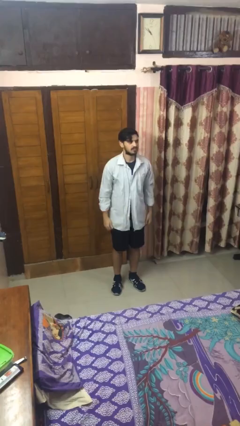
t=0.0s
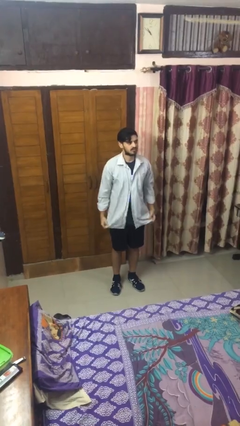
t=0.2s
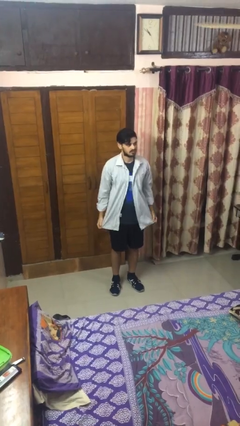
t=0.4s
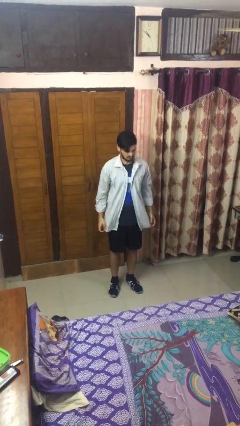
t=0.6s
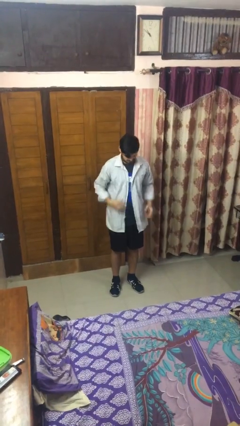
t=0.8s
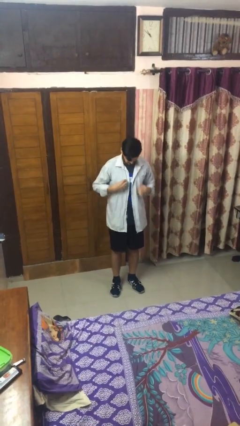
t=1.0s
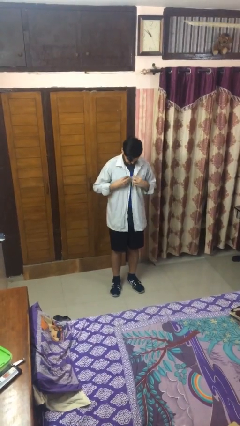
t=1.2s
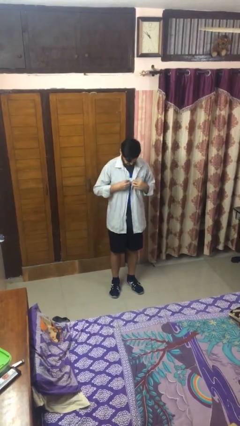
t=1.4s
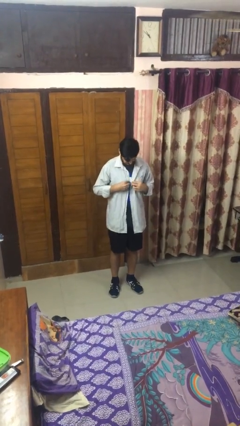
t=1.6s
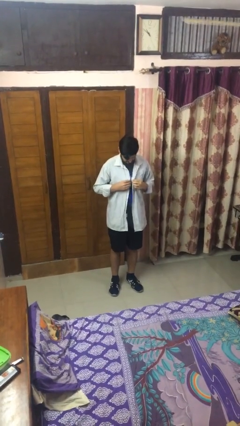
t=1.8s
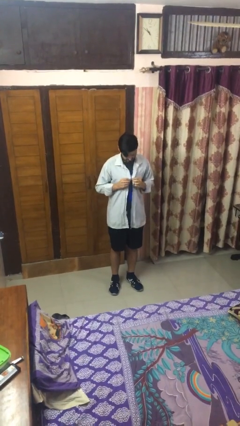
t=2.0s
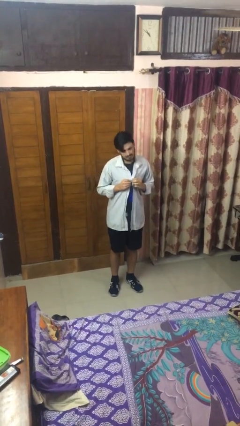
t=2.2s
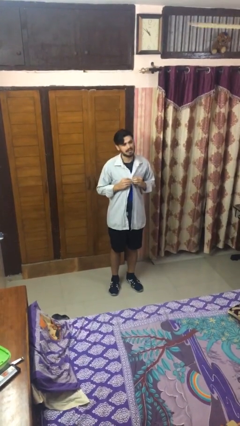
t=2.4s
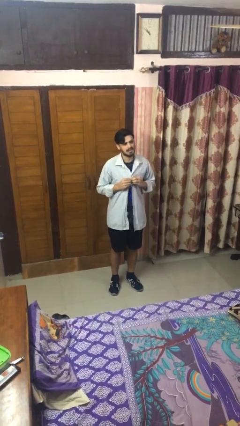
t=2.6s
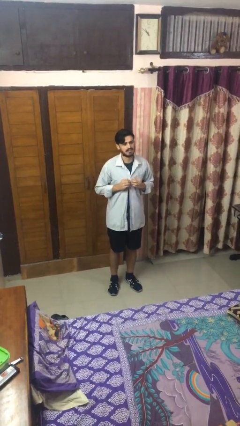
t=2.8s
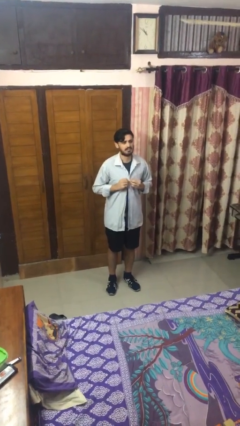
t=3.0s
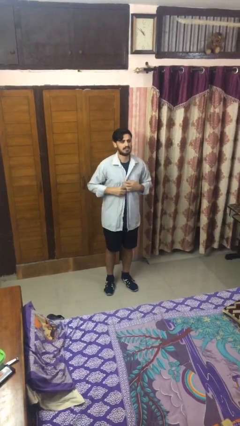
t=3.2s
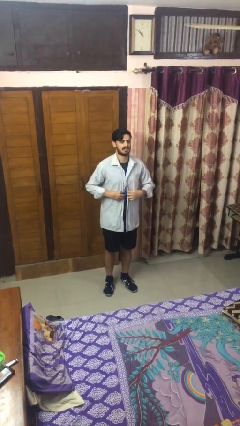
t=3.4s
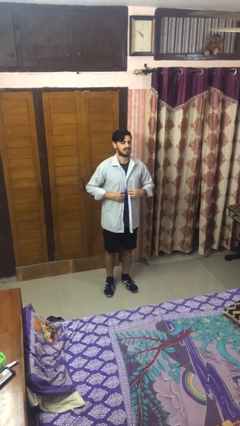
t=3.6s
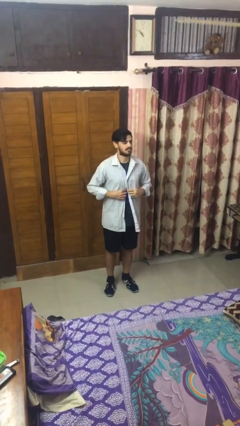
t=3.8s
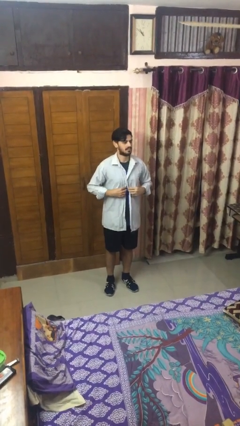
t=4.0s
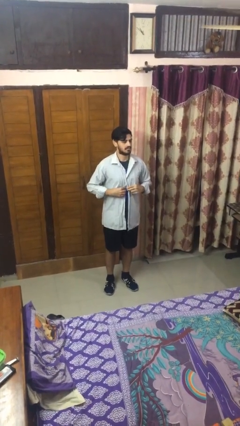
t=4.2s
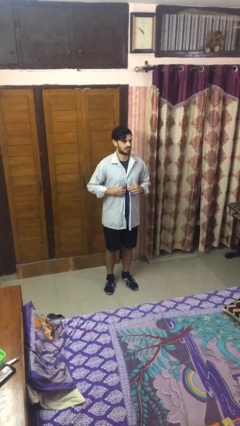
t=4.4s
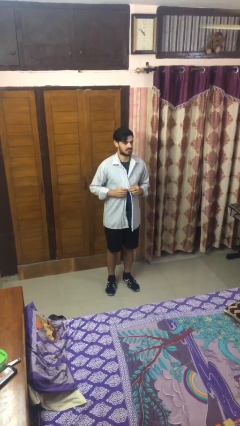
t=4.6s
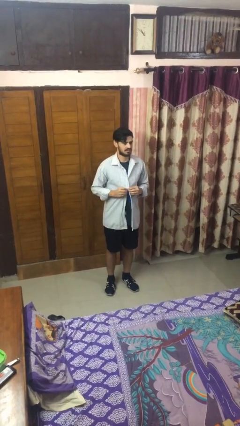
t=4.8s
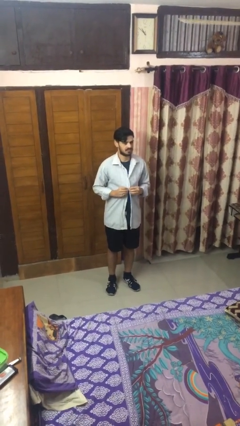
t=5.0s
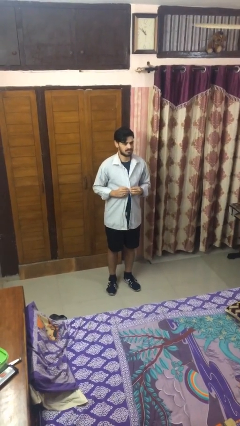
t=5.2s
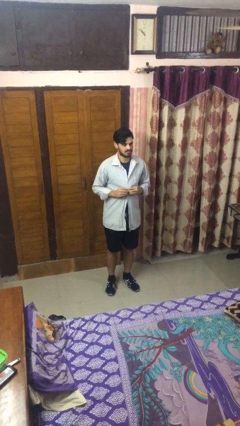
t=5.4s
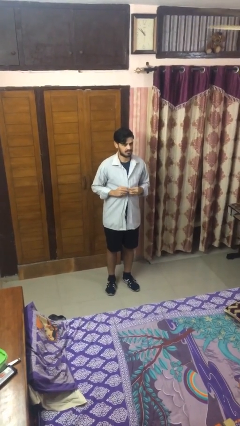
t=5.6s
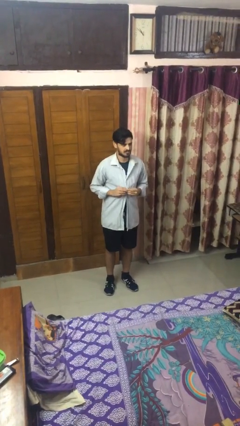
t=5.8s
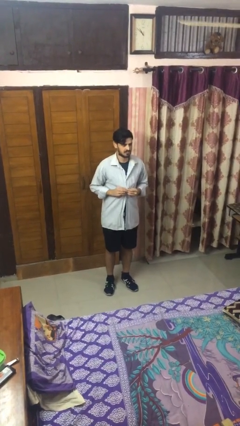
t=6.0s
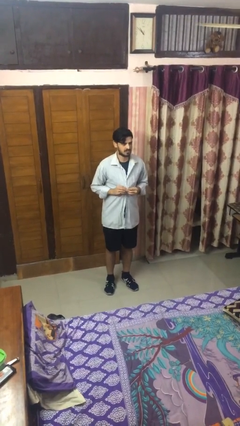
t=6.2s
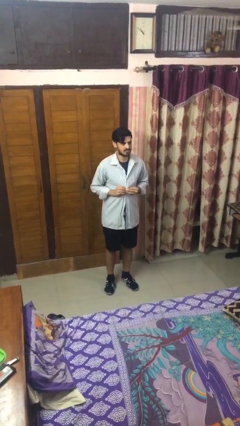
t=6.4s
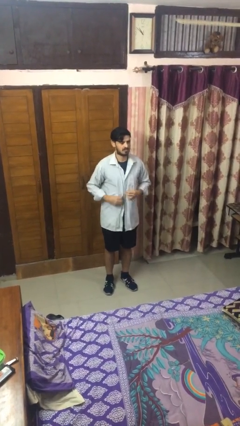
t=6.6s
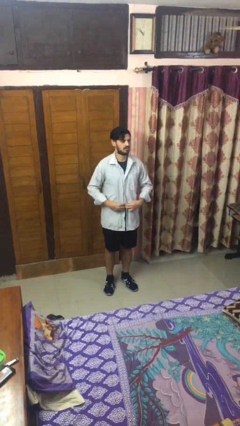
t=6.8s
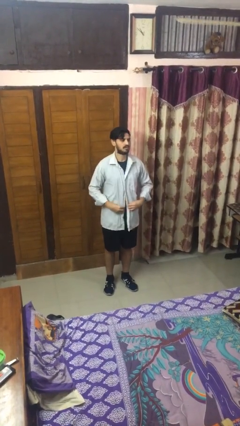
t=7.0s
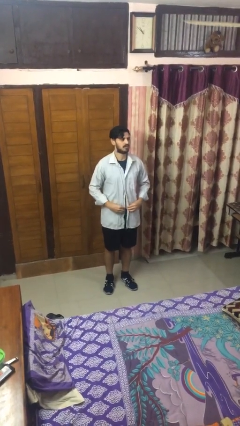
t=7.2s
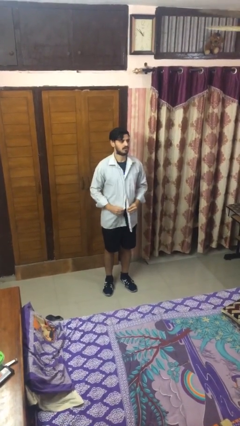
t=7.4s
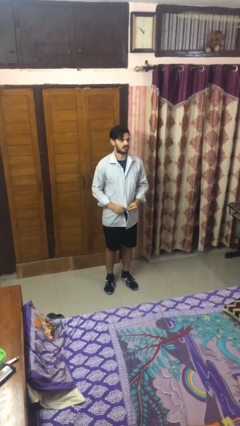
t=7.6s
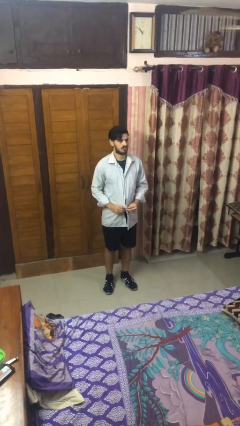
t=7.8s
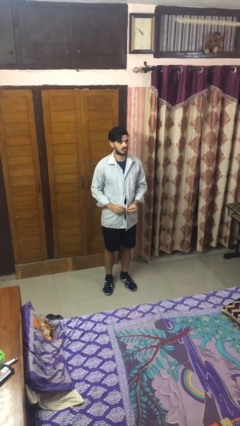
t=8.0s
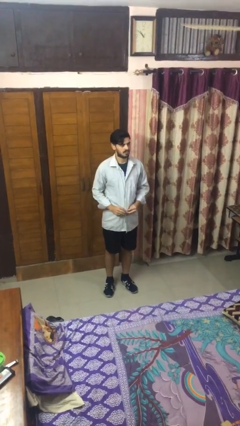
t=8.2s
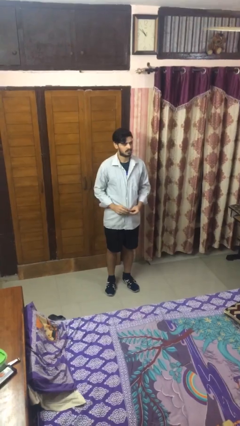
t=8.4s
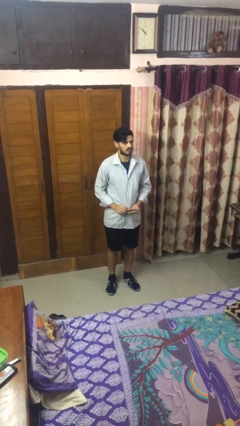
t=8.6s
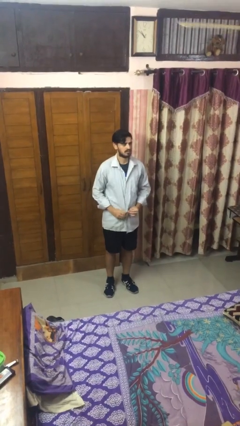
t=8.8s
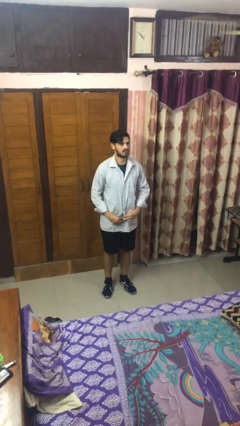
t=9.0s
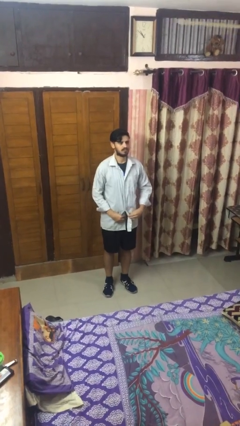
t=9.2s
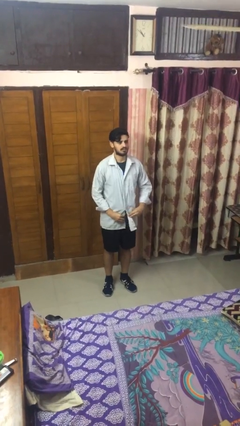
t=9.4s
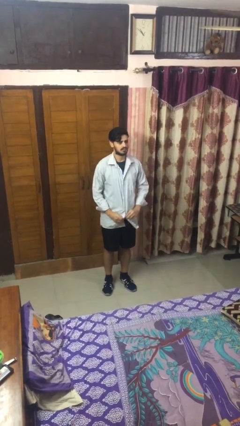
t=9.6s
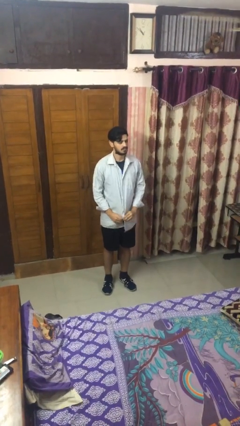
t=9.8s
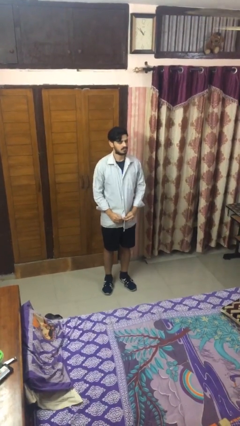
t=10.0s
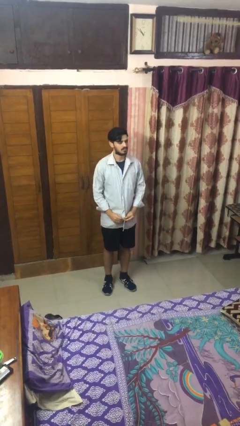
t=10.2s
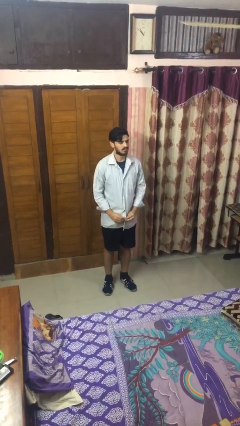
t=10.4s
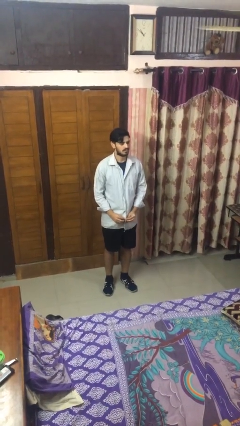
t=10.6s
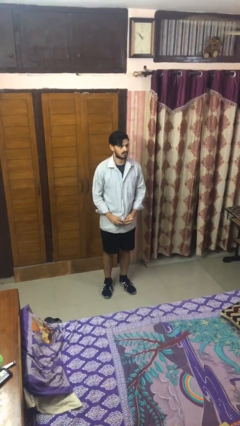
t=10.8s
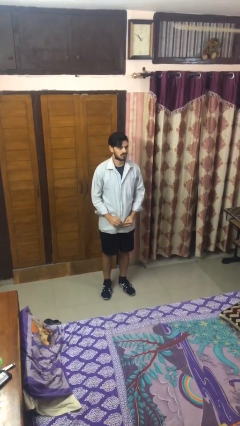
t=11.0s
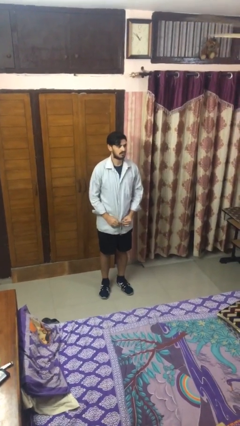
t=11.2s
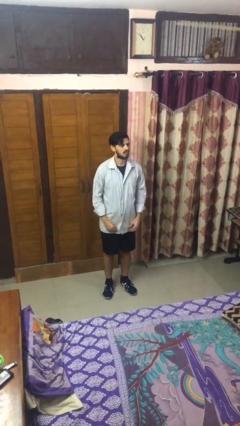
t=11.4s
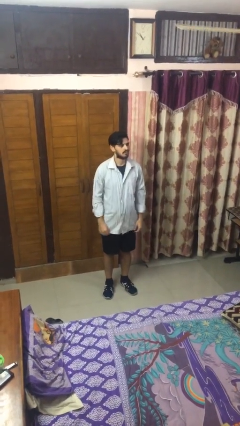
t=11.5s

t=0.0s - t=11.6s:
person buttons shirt

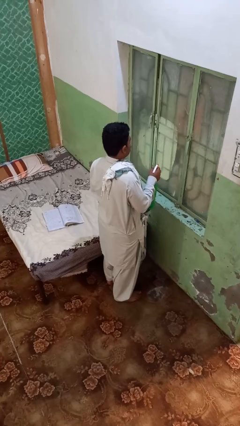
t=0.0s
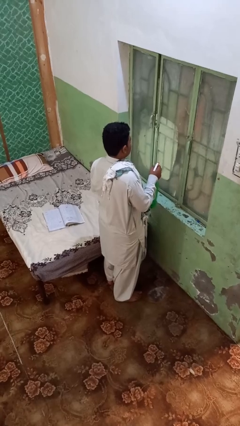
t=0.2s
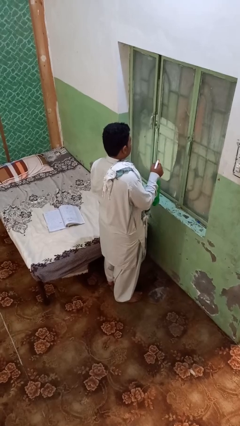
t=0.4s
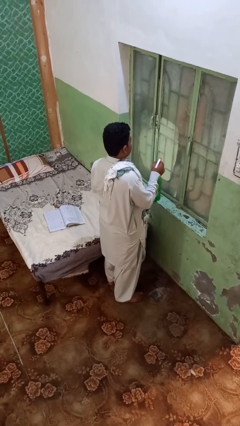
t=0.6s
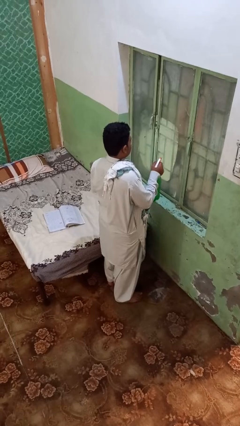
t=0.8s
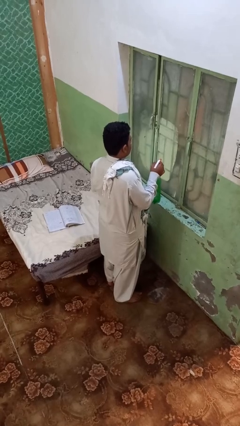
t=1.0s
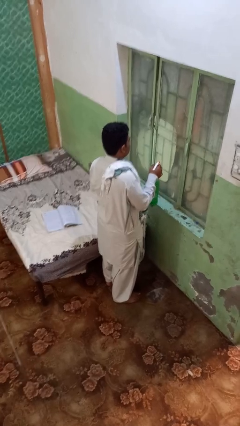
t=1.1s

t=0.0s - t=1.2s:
person sprays from bottle

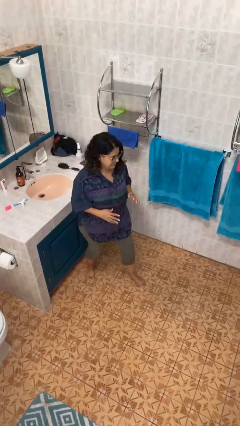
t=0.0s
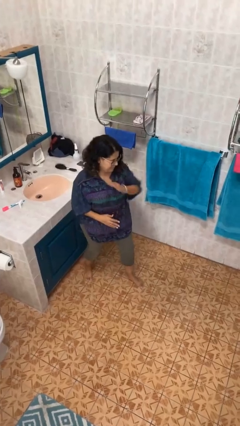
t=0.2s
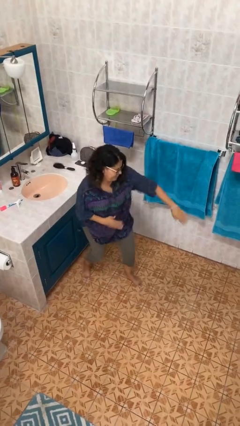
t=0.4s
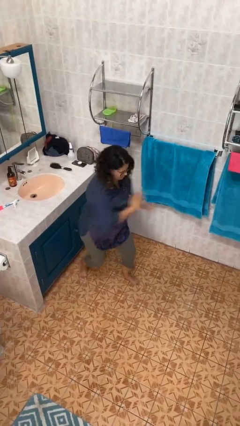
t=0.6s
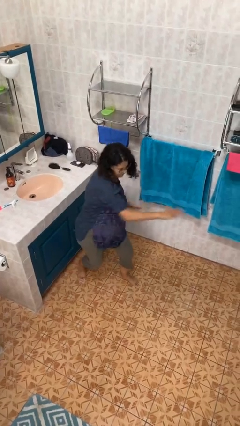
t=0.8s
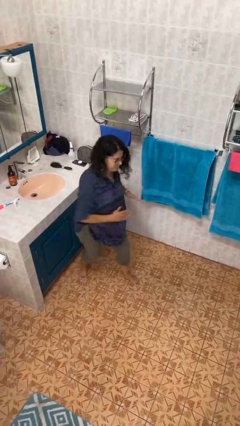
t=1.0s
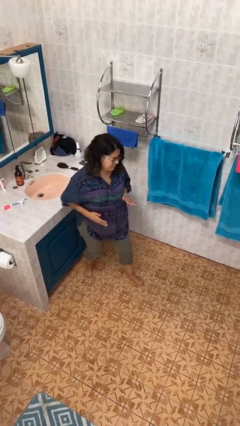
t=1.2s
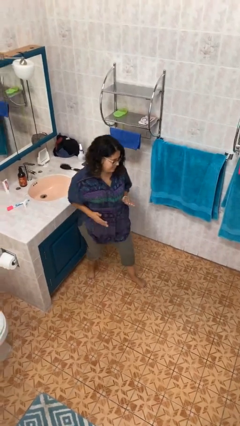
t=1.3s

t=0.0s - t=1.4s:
person karate chop

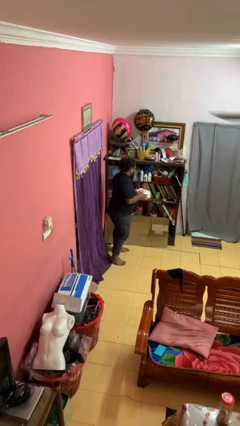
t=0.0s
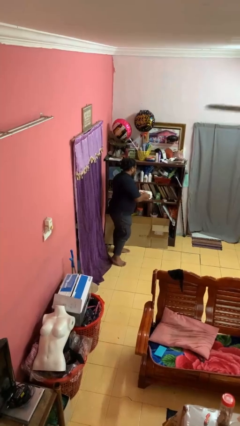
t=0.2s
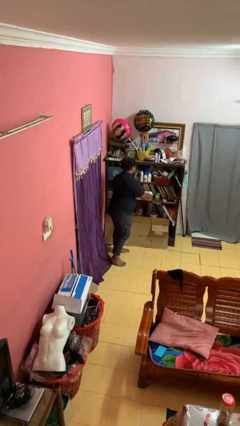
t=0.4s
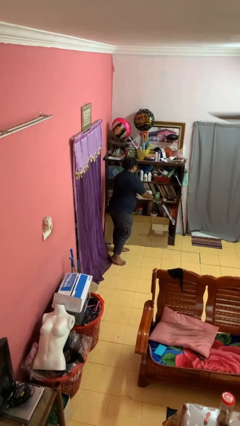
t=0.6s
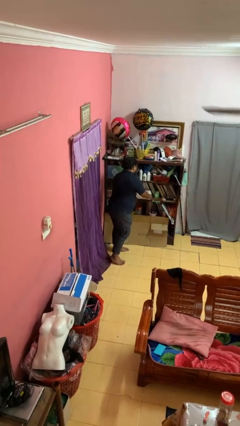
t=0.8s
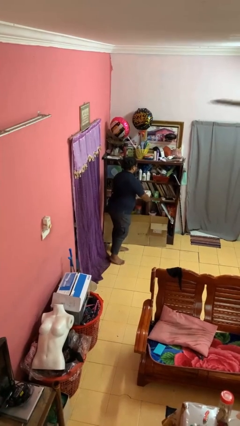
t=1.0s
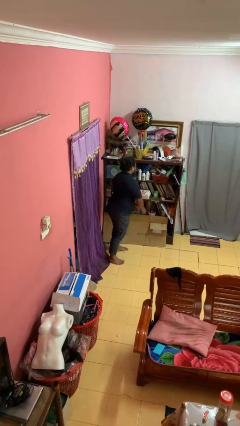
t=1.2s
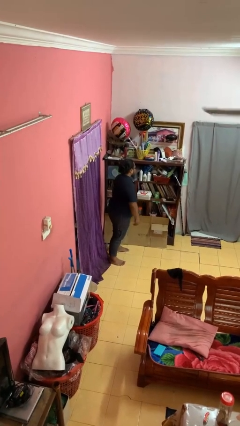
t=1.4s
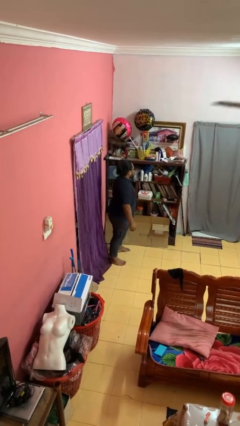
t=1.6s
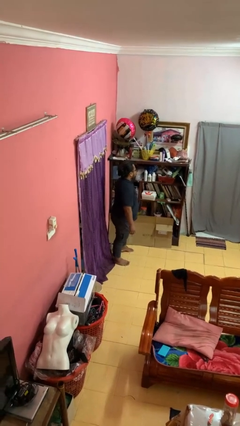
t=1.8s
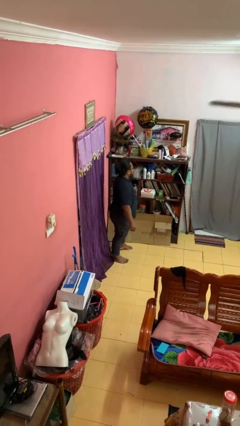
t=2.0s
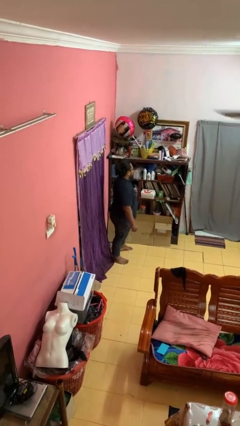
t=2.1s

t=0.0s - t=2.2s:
person puts object in cabinet

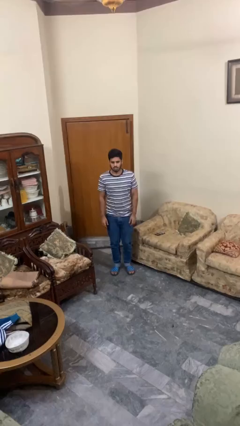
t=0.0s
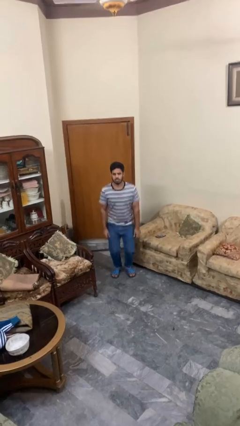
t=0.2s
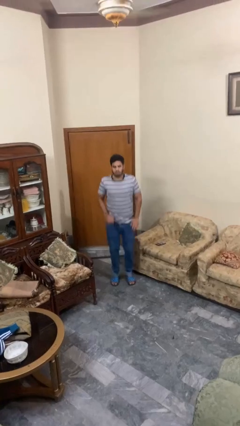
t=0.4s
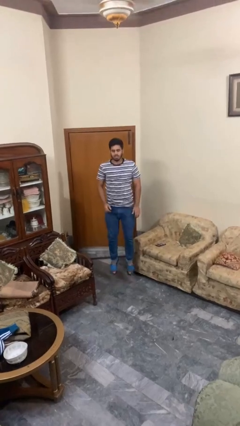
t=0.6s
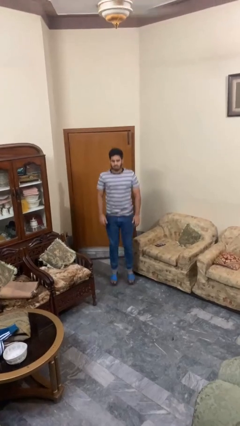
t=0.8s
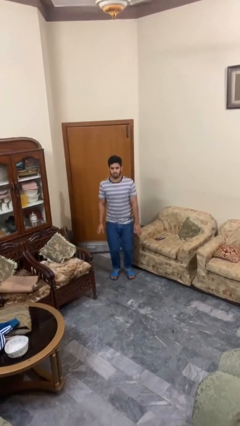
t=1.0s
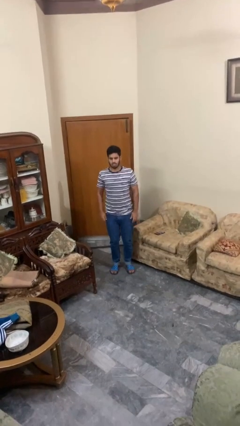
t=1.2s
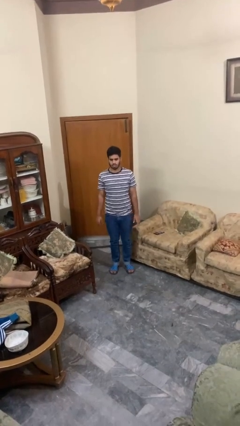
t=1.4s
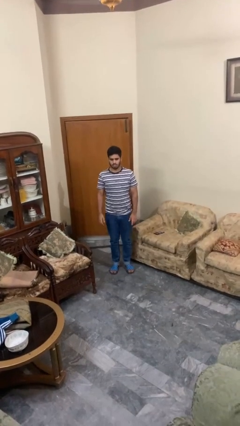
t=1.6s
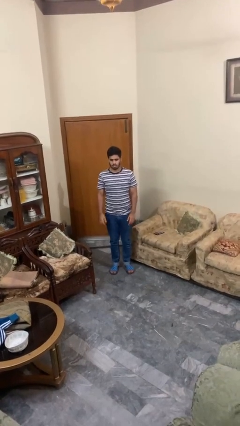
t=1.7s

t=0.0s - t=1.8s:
person jumps
